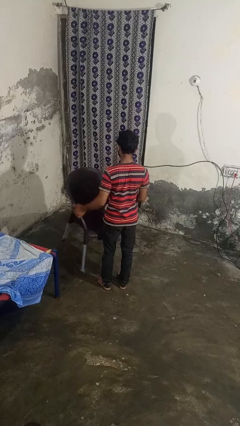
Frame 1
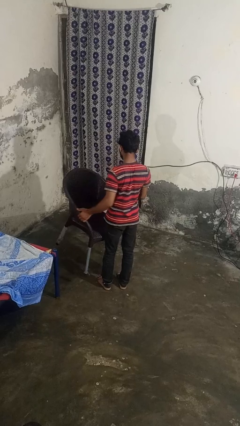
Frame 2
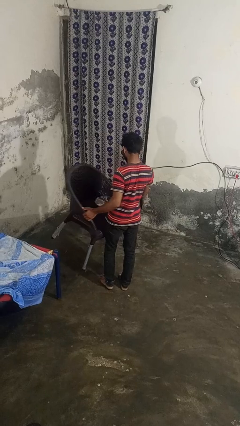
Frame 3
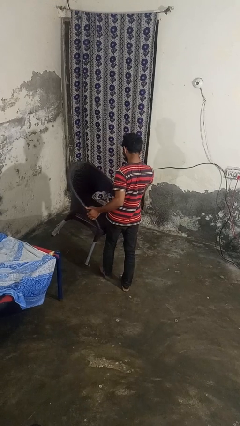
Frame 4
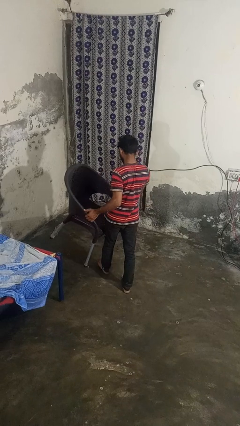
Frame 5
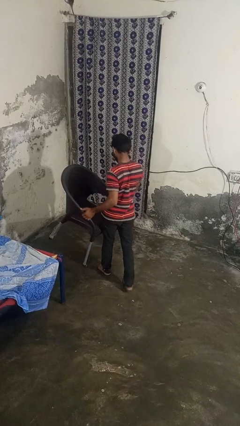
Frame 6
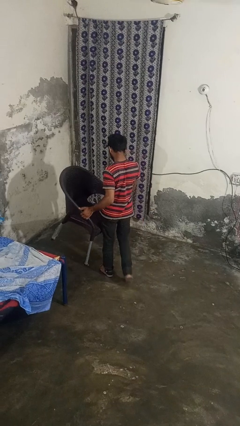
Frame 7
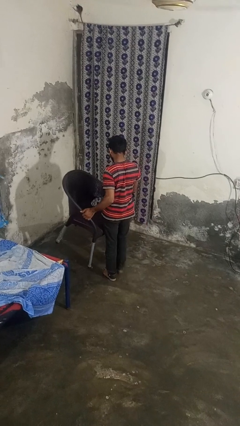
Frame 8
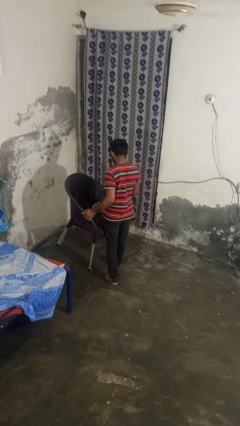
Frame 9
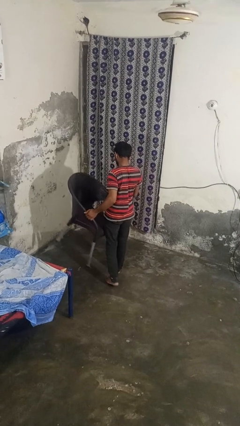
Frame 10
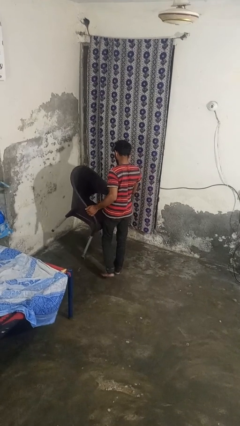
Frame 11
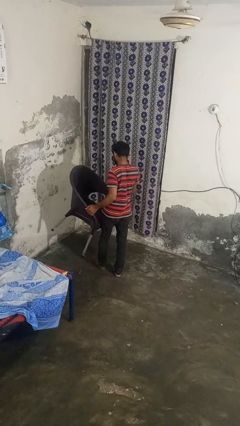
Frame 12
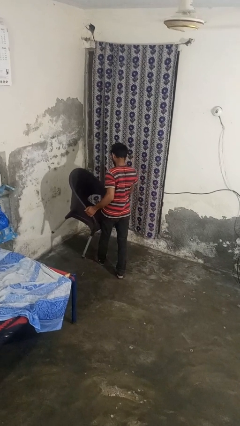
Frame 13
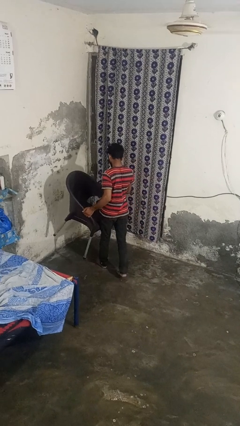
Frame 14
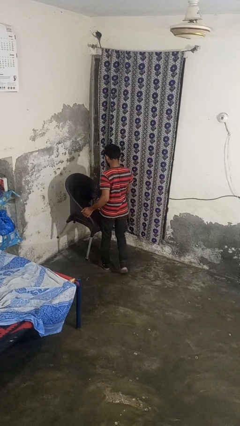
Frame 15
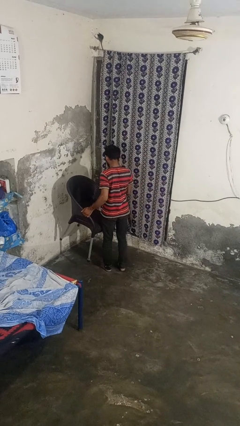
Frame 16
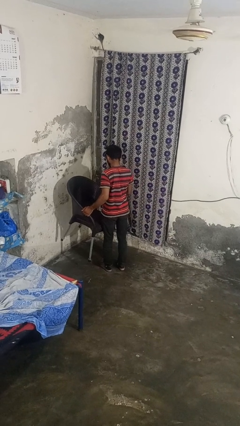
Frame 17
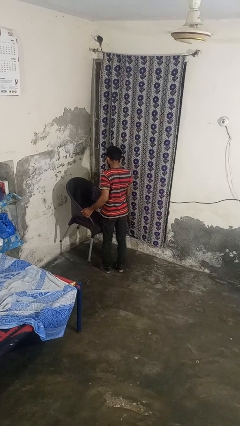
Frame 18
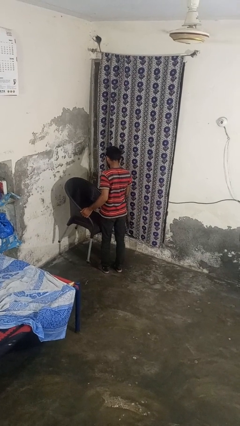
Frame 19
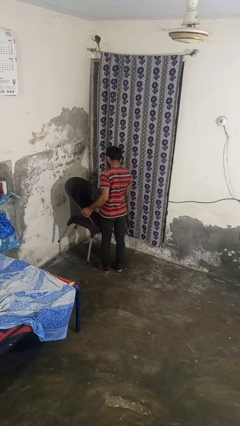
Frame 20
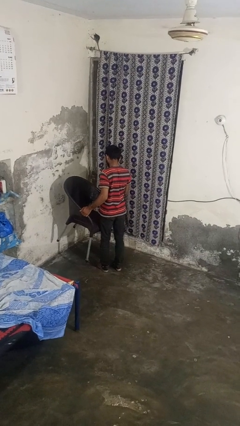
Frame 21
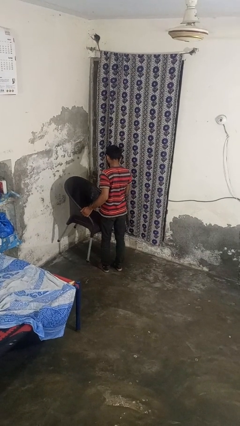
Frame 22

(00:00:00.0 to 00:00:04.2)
person carries furniture

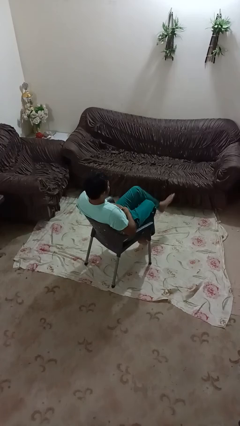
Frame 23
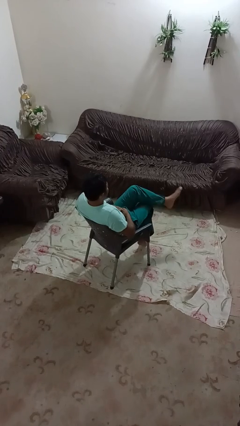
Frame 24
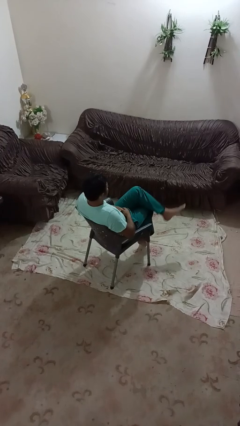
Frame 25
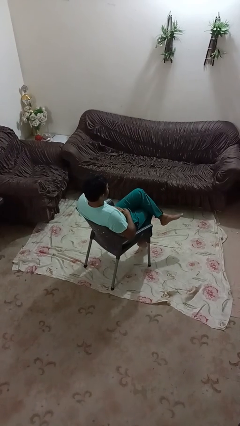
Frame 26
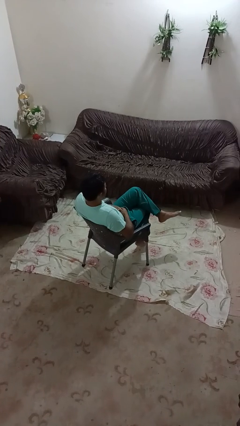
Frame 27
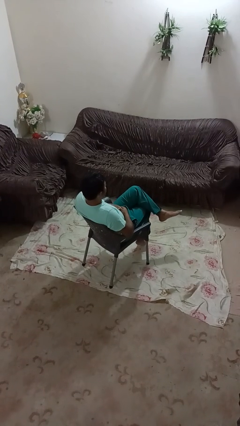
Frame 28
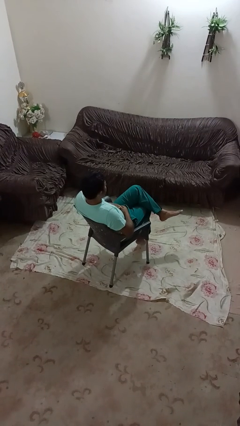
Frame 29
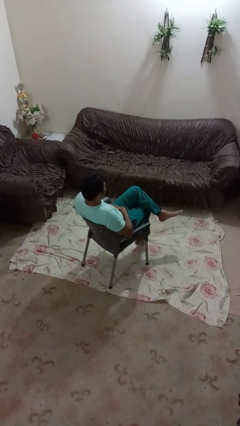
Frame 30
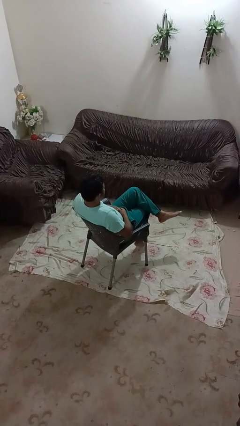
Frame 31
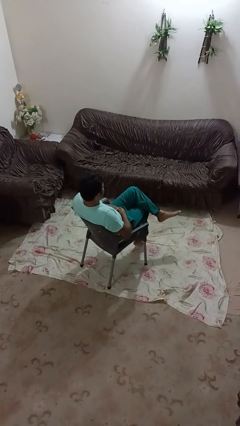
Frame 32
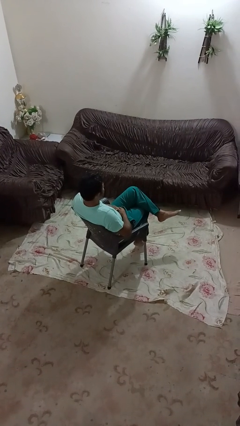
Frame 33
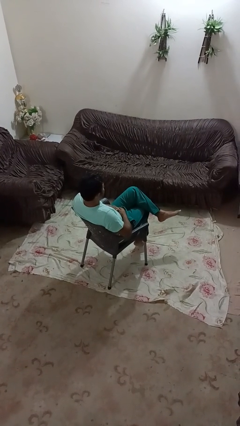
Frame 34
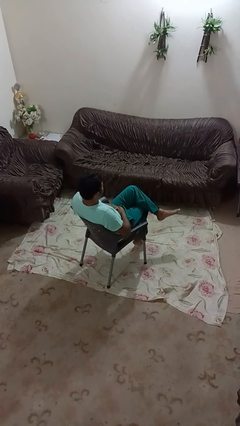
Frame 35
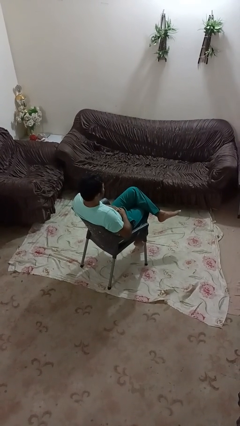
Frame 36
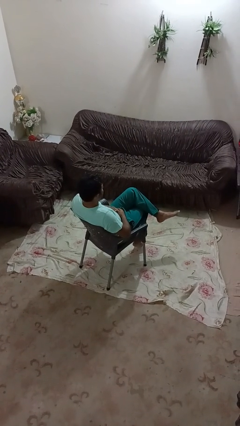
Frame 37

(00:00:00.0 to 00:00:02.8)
person crosses legs

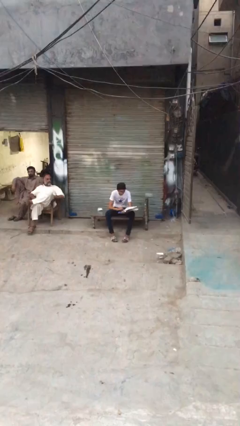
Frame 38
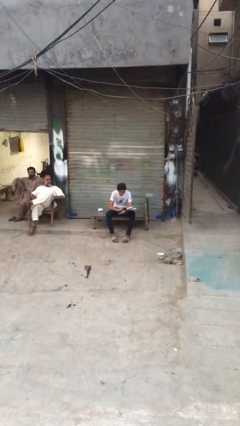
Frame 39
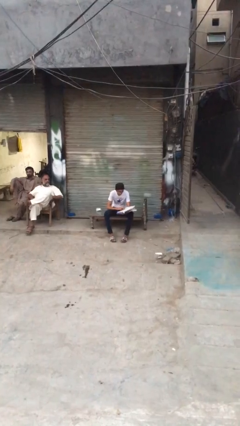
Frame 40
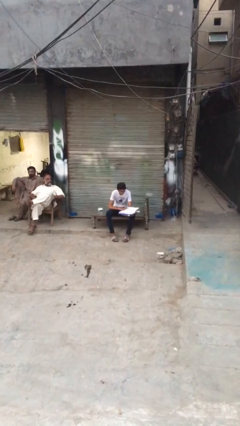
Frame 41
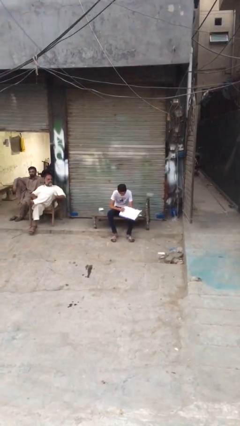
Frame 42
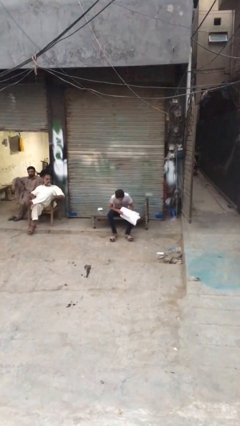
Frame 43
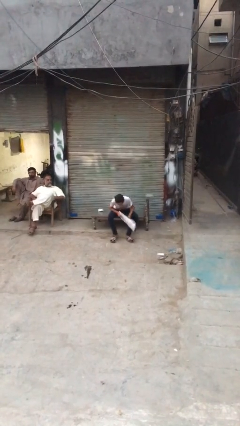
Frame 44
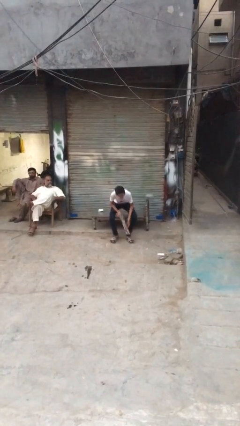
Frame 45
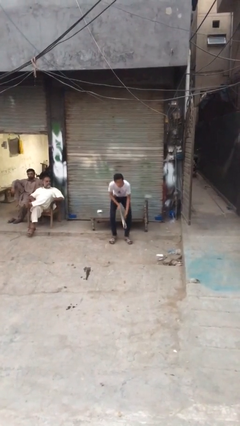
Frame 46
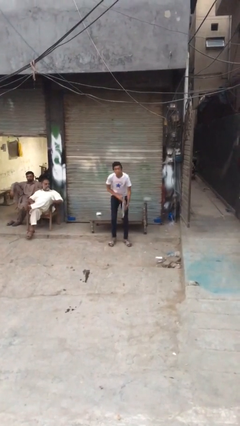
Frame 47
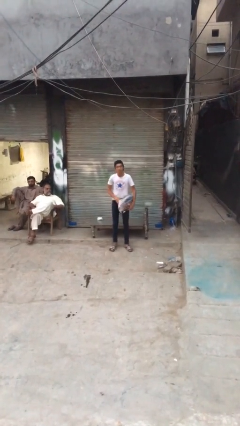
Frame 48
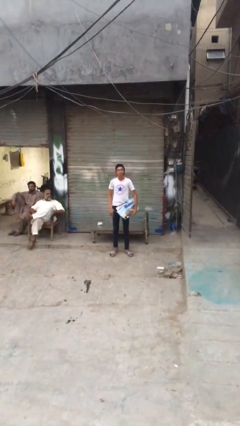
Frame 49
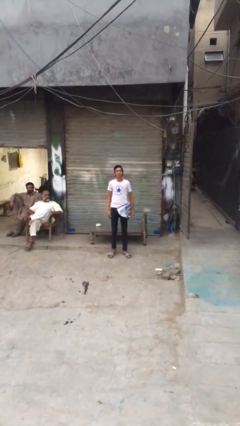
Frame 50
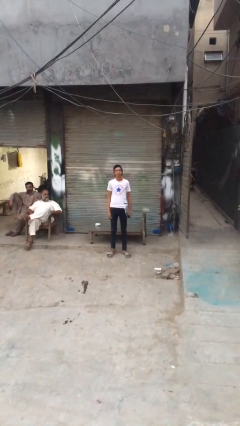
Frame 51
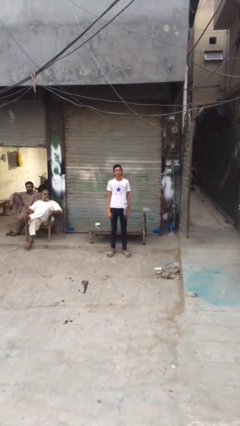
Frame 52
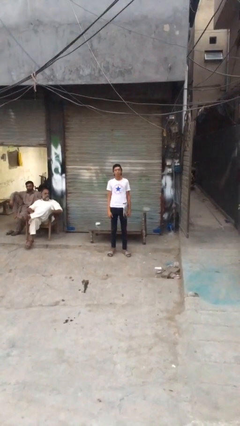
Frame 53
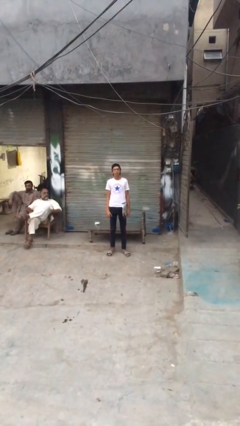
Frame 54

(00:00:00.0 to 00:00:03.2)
person stands up

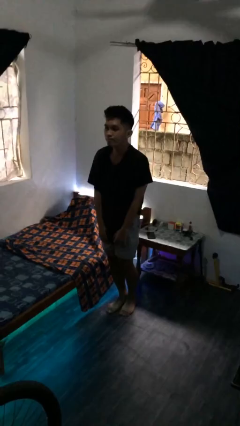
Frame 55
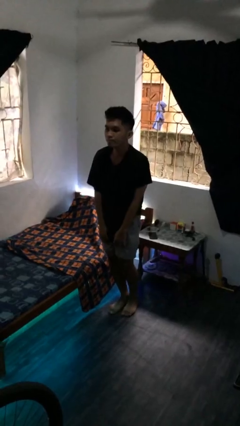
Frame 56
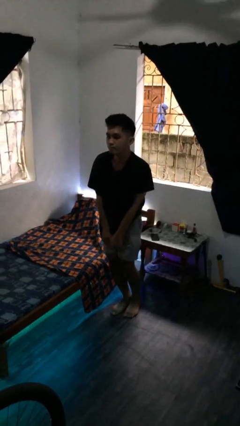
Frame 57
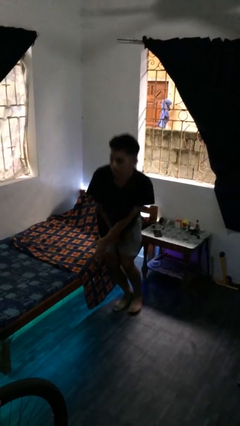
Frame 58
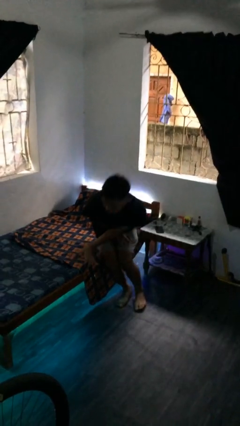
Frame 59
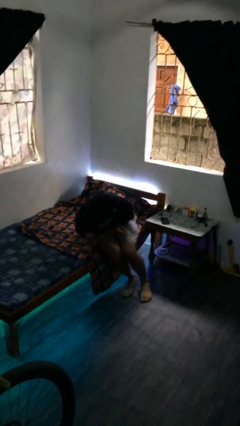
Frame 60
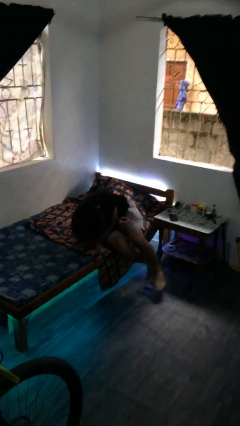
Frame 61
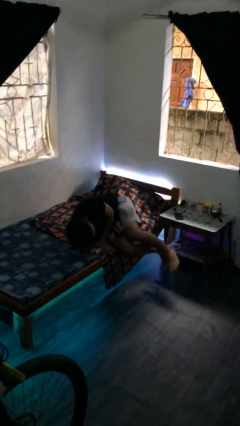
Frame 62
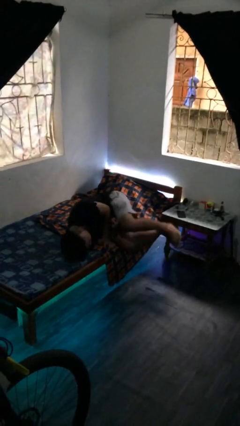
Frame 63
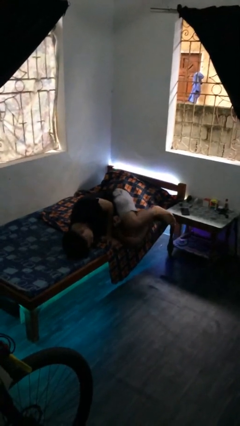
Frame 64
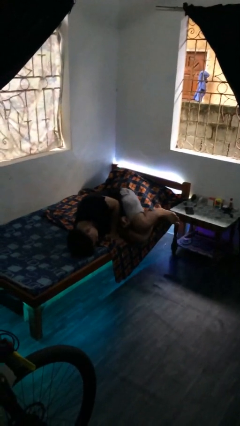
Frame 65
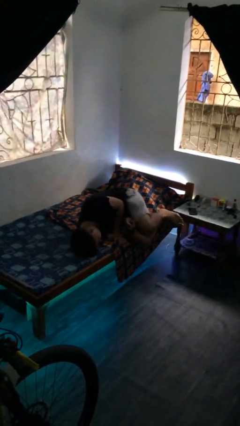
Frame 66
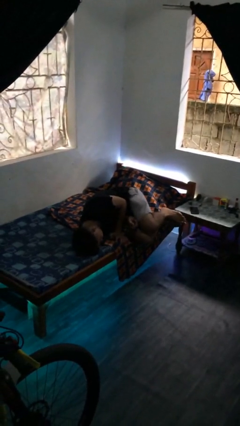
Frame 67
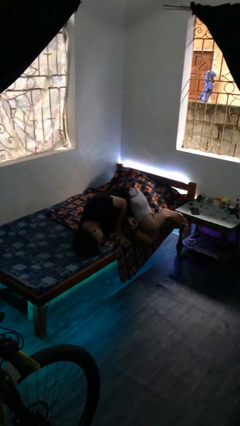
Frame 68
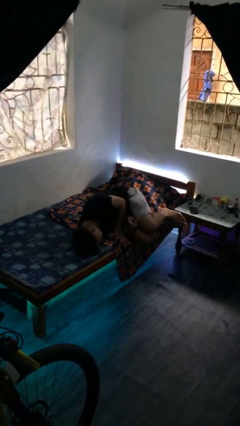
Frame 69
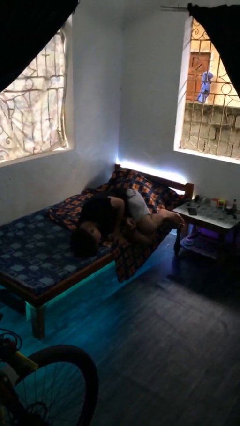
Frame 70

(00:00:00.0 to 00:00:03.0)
person lies down on bed

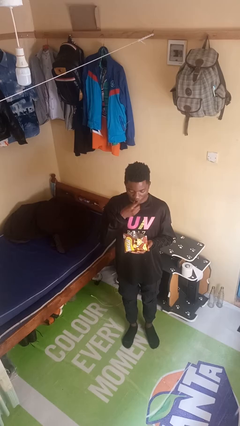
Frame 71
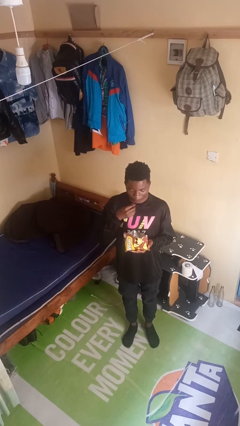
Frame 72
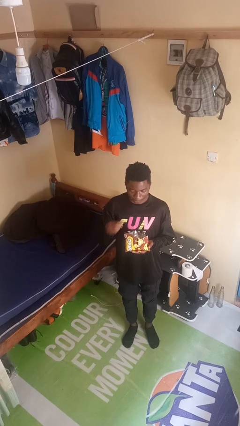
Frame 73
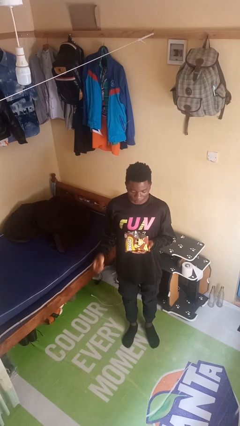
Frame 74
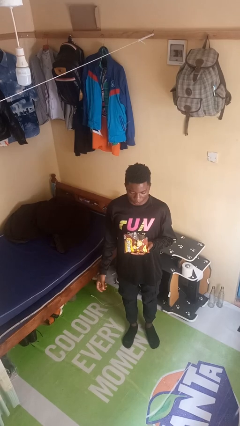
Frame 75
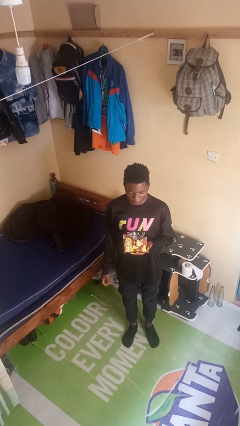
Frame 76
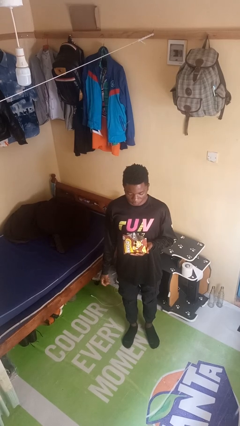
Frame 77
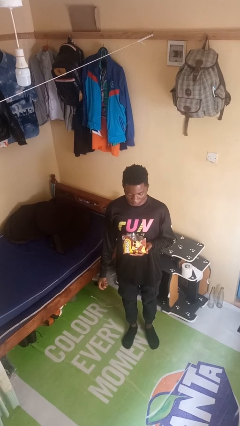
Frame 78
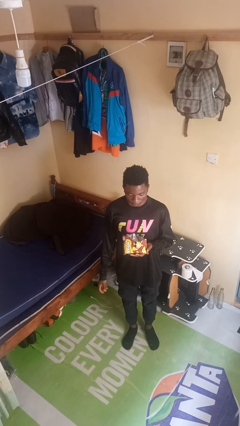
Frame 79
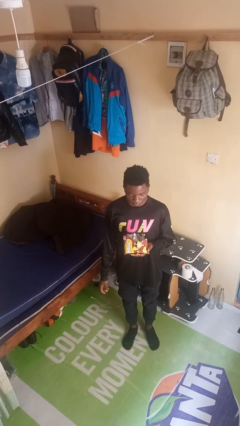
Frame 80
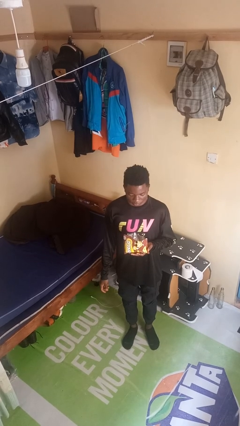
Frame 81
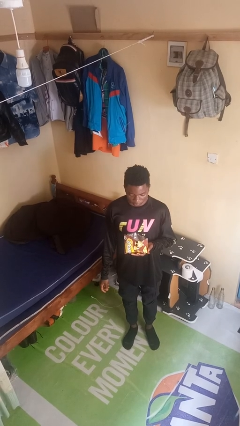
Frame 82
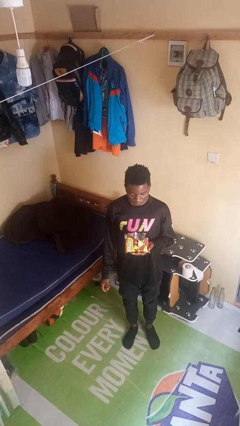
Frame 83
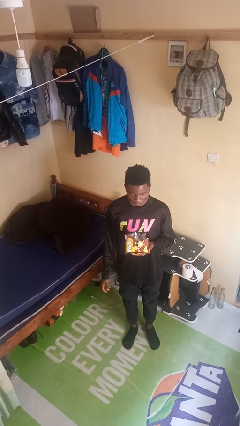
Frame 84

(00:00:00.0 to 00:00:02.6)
person eats snack from bag

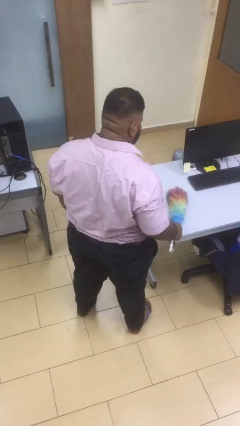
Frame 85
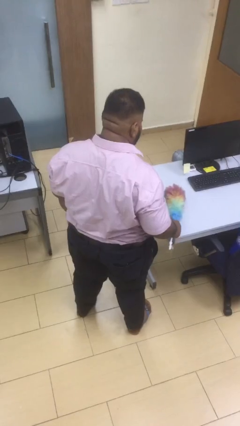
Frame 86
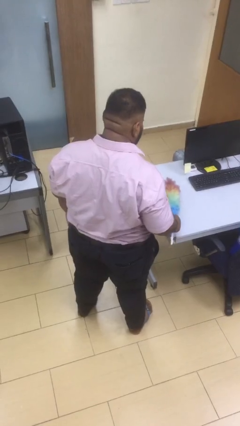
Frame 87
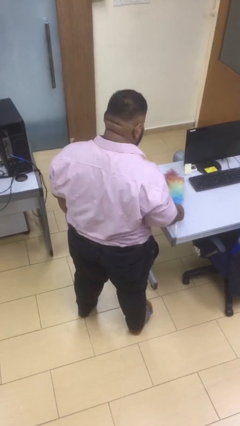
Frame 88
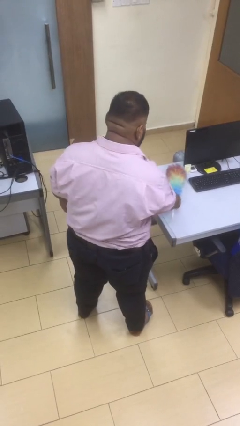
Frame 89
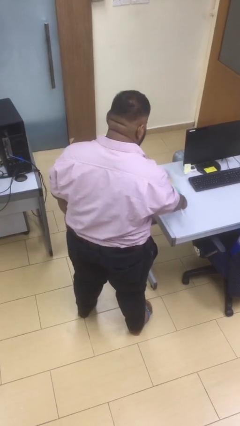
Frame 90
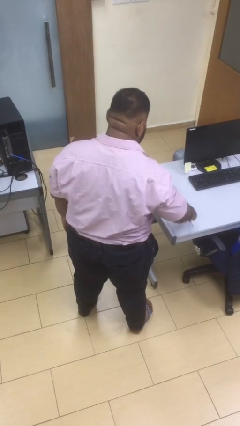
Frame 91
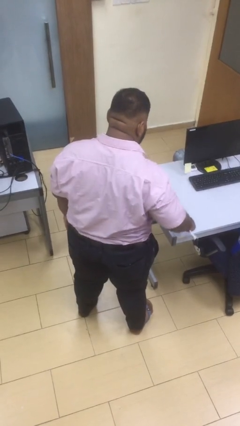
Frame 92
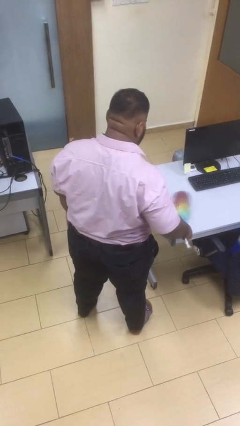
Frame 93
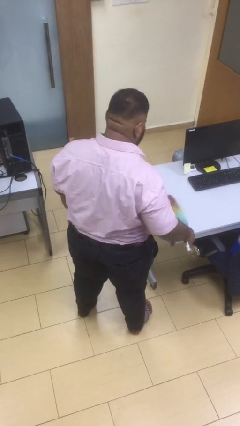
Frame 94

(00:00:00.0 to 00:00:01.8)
person dusts furniture
